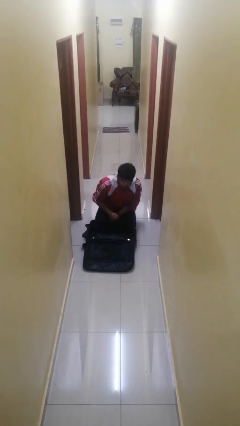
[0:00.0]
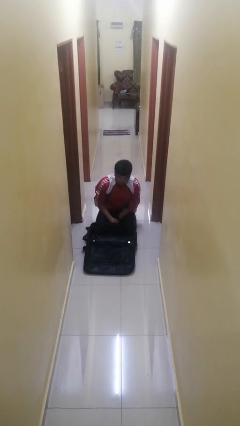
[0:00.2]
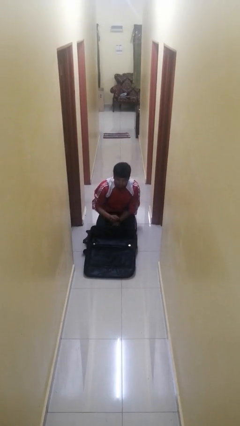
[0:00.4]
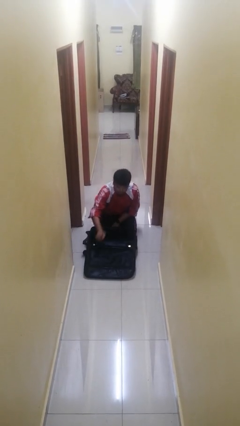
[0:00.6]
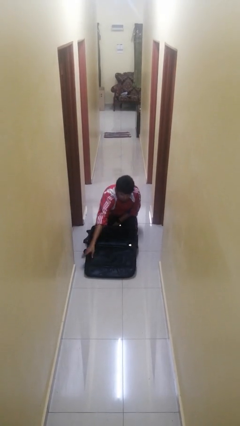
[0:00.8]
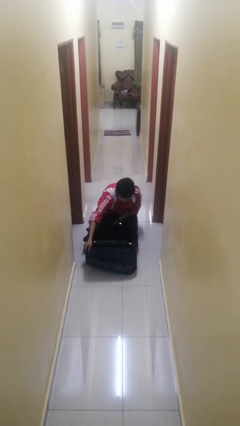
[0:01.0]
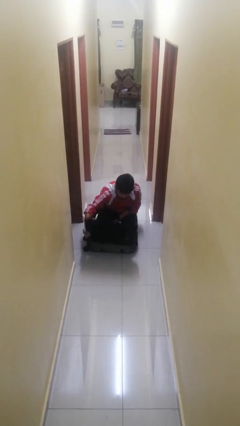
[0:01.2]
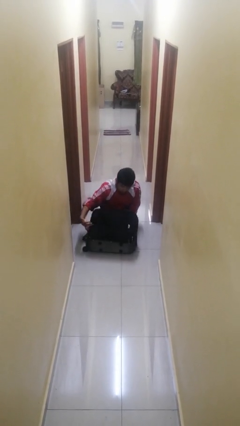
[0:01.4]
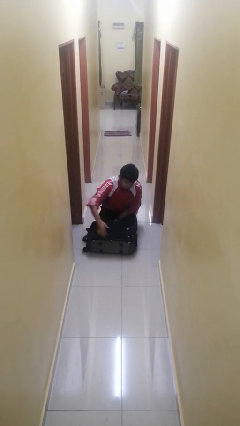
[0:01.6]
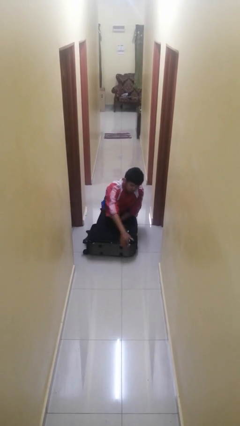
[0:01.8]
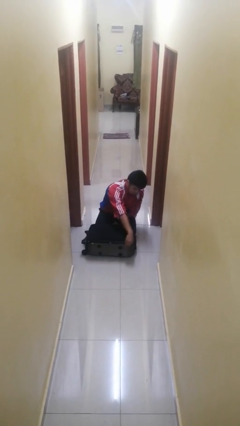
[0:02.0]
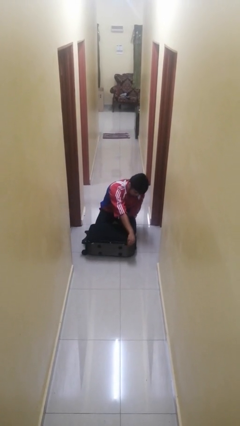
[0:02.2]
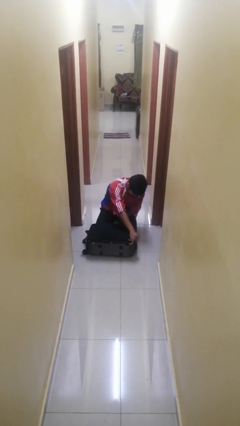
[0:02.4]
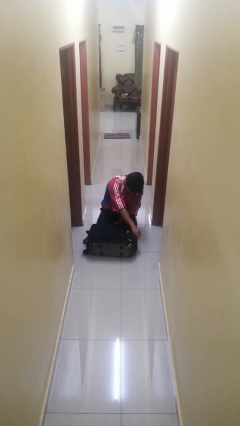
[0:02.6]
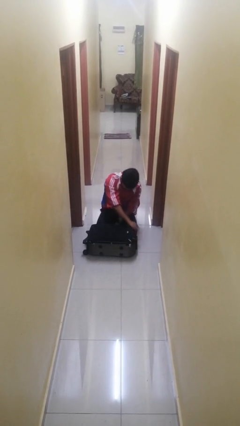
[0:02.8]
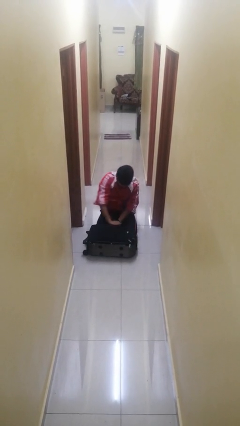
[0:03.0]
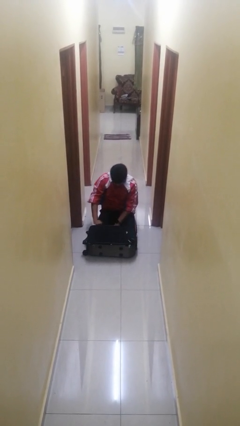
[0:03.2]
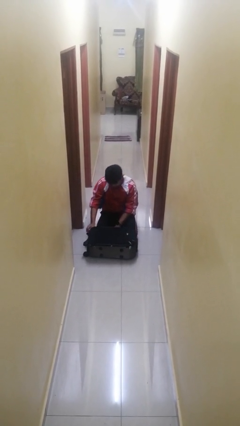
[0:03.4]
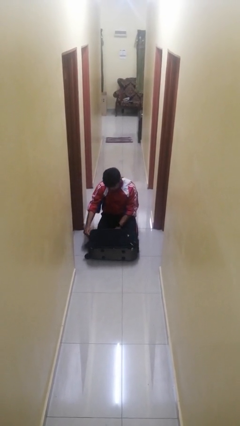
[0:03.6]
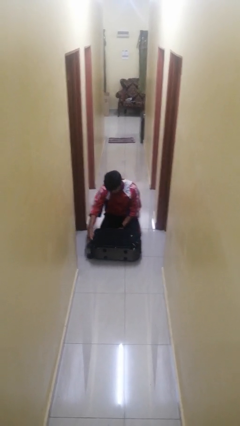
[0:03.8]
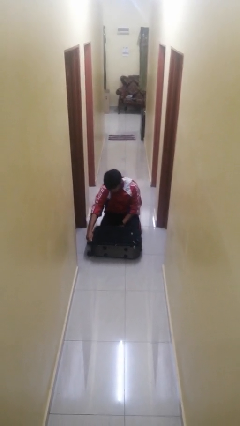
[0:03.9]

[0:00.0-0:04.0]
person closes suitcase

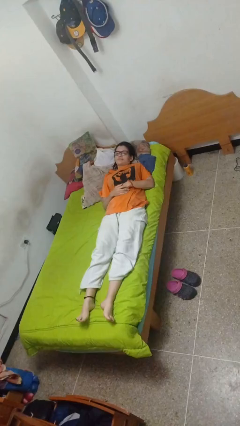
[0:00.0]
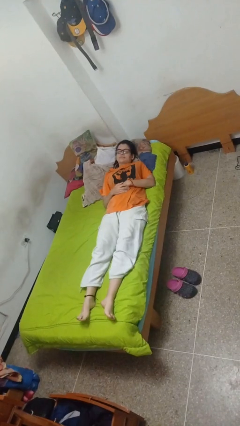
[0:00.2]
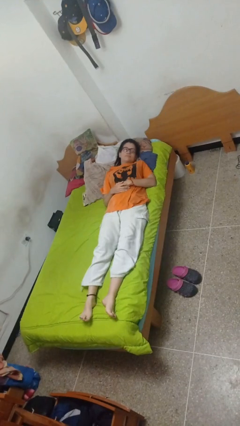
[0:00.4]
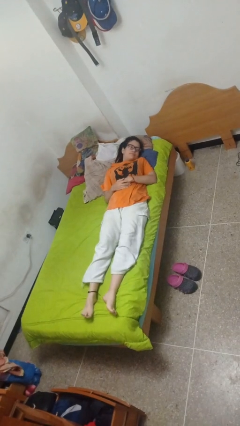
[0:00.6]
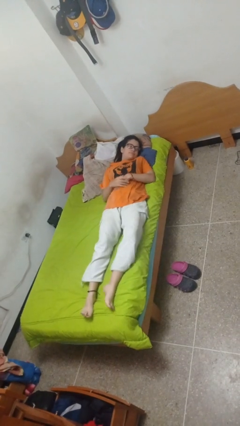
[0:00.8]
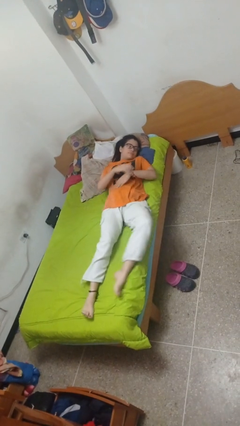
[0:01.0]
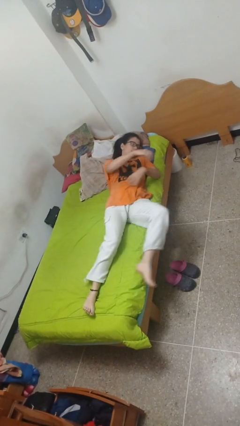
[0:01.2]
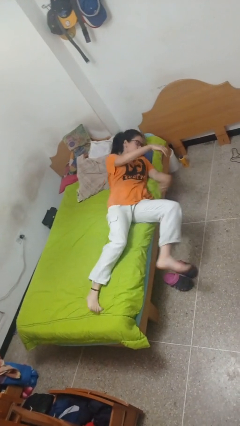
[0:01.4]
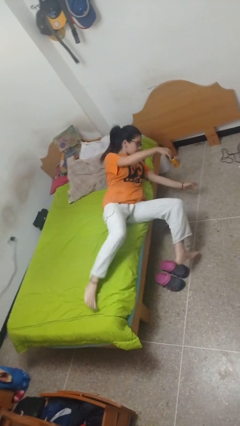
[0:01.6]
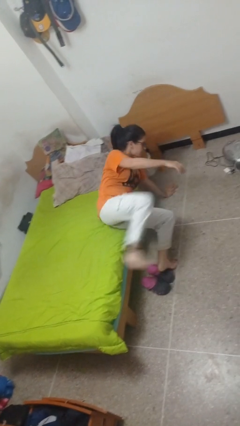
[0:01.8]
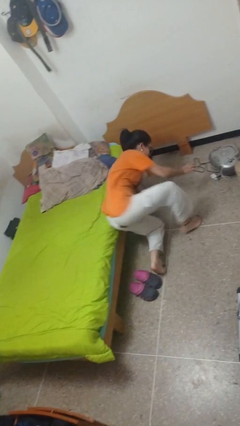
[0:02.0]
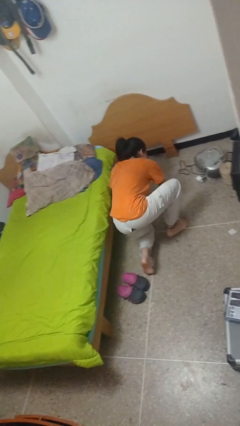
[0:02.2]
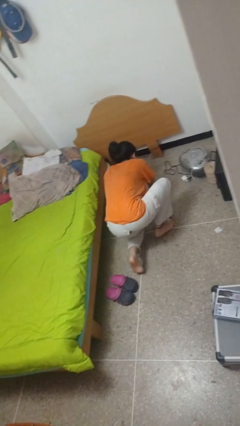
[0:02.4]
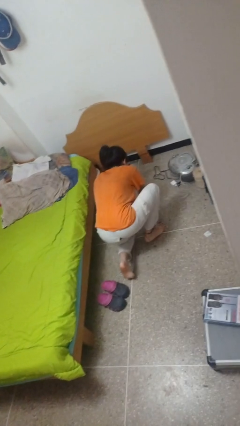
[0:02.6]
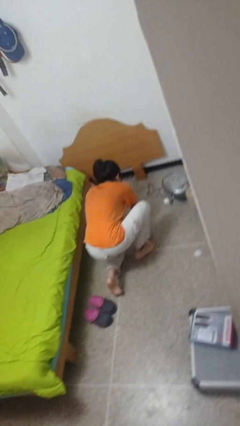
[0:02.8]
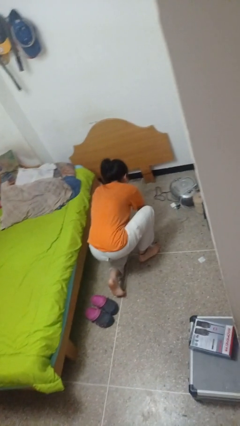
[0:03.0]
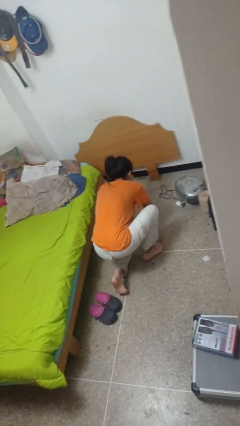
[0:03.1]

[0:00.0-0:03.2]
person falls from bed

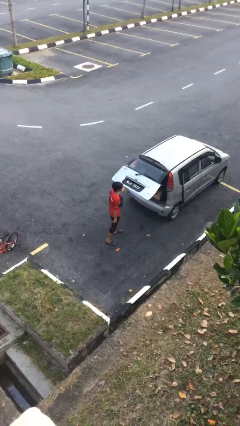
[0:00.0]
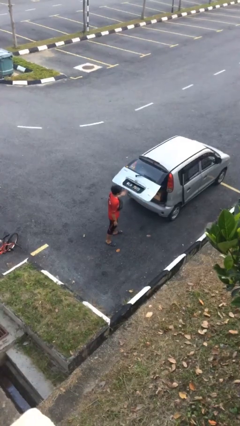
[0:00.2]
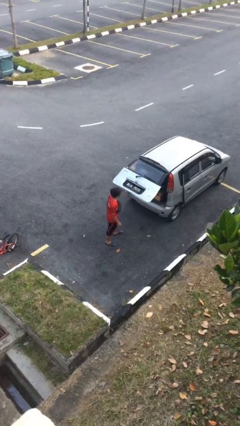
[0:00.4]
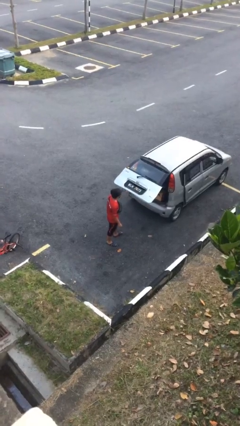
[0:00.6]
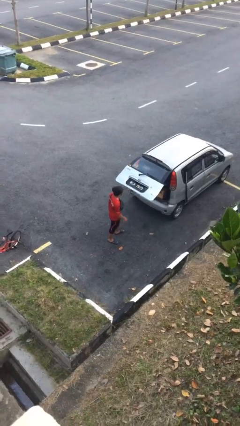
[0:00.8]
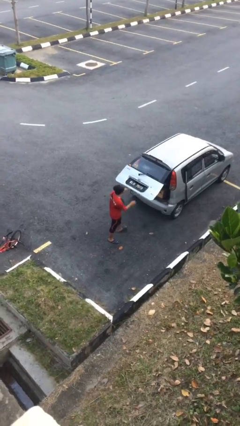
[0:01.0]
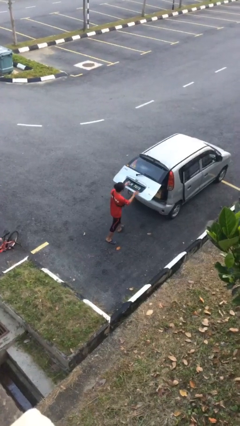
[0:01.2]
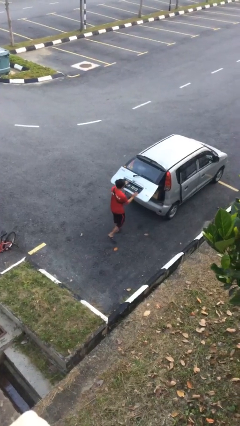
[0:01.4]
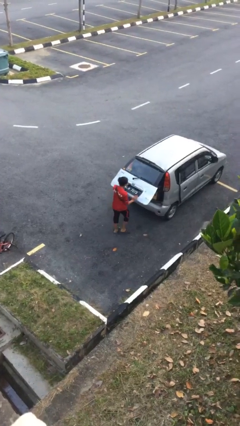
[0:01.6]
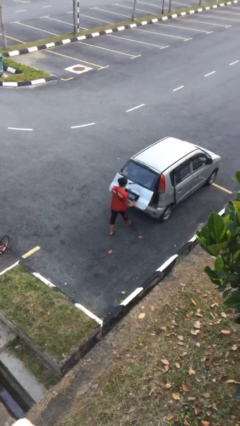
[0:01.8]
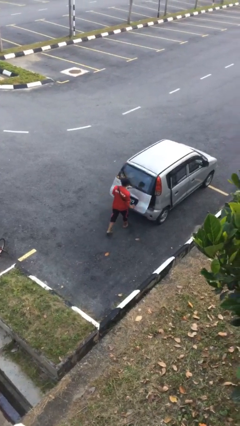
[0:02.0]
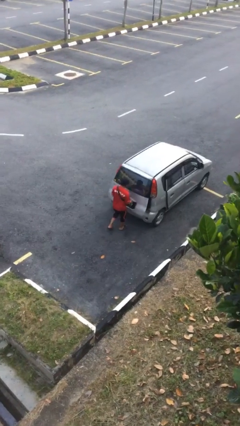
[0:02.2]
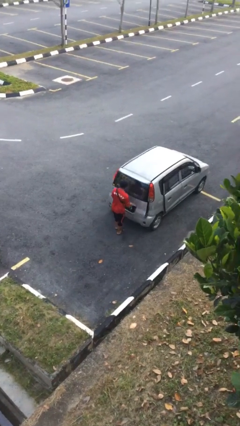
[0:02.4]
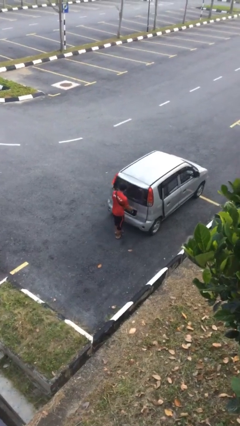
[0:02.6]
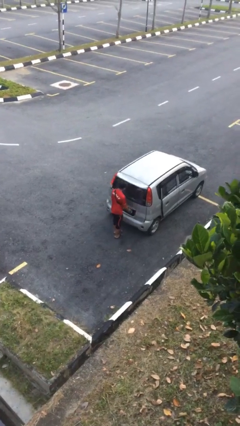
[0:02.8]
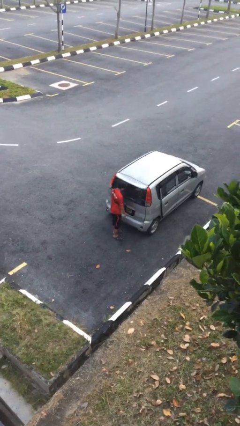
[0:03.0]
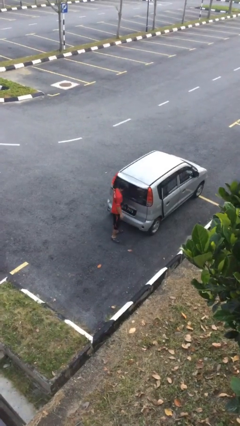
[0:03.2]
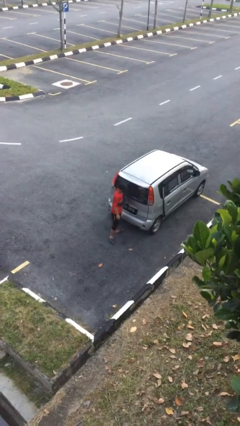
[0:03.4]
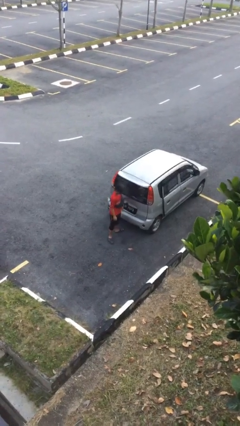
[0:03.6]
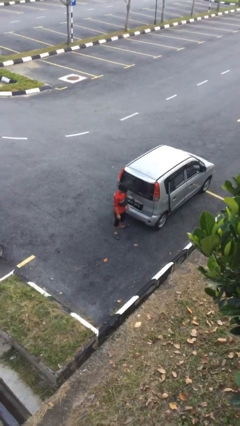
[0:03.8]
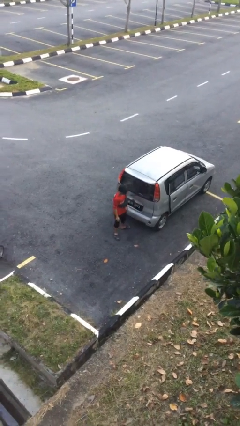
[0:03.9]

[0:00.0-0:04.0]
person closes car trunk

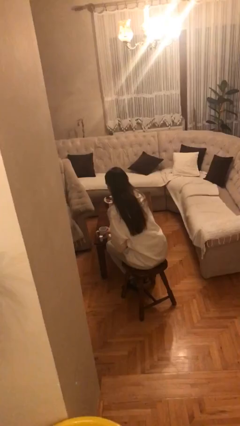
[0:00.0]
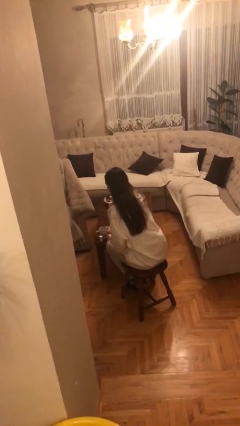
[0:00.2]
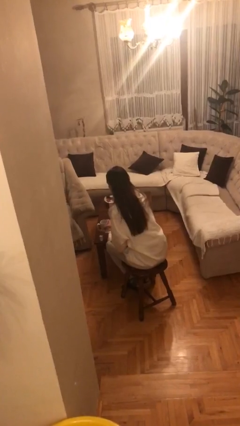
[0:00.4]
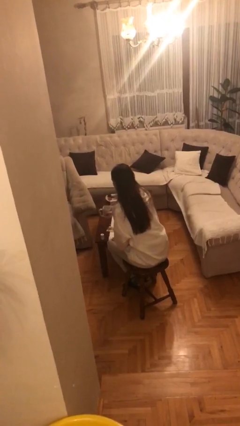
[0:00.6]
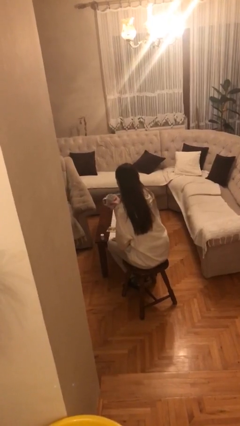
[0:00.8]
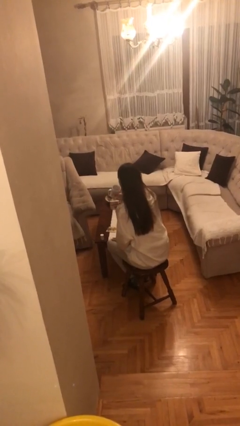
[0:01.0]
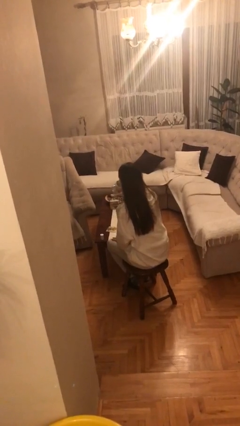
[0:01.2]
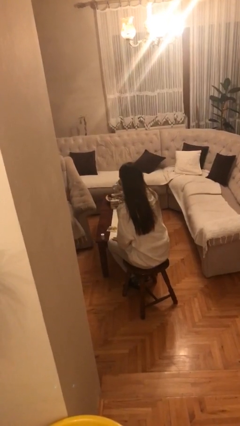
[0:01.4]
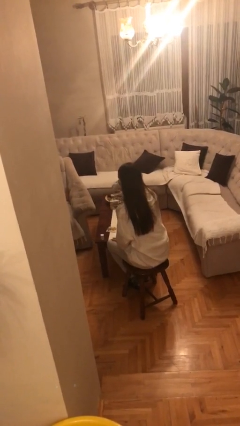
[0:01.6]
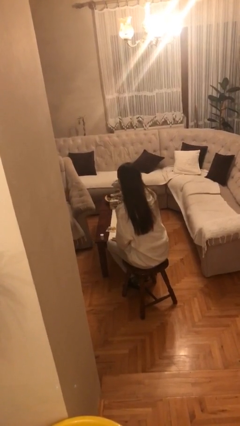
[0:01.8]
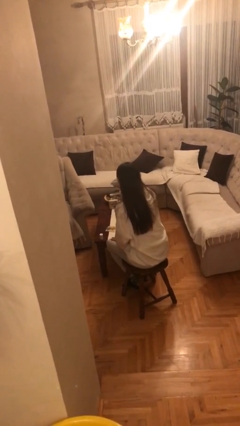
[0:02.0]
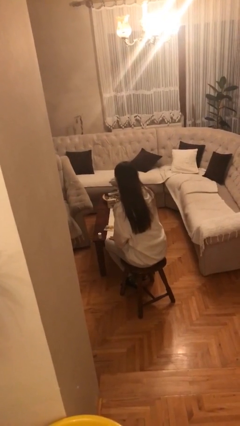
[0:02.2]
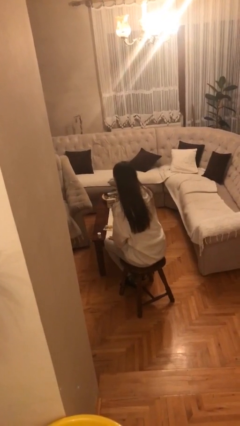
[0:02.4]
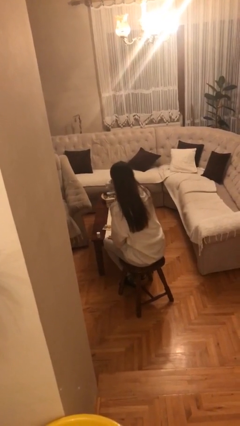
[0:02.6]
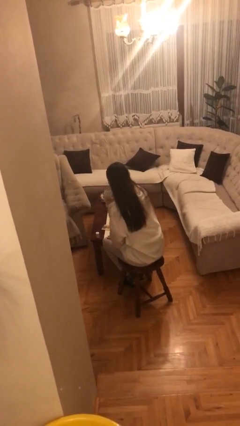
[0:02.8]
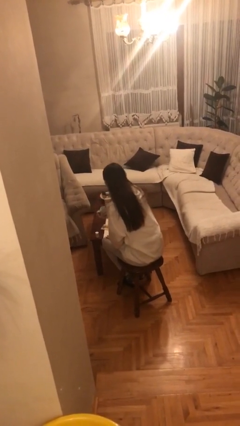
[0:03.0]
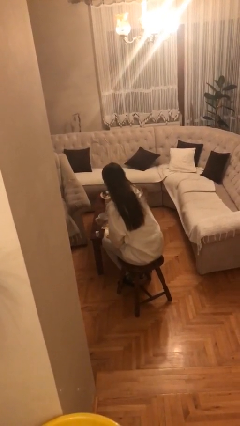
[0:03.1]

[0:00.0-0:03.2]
person drinks from cup

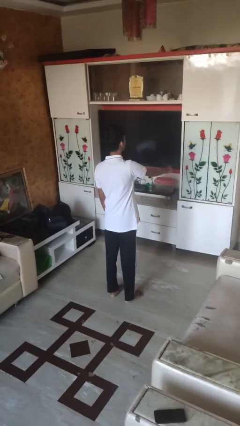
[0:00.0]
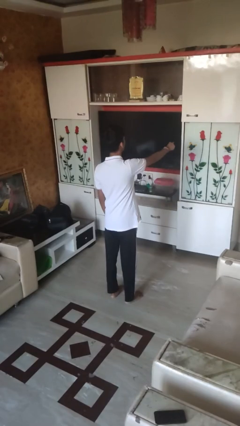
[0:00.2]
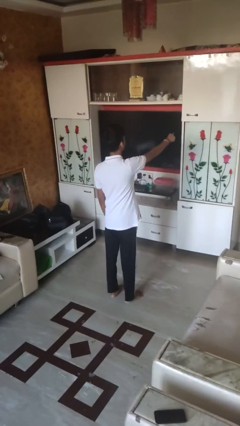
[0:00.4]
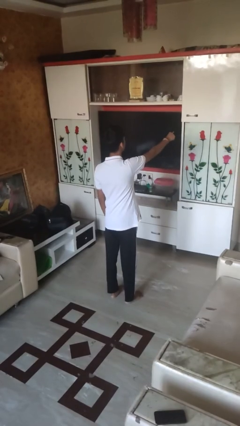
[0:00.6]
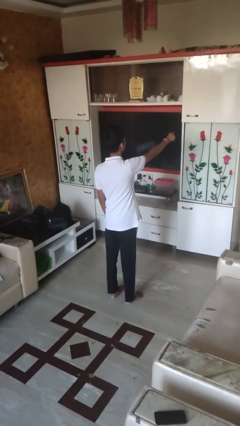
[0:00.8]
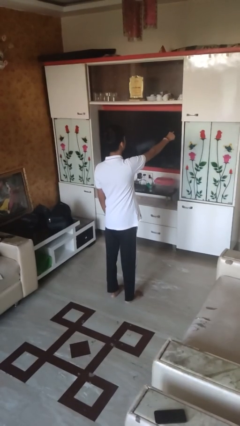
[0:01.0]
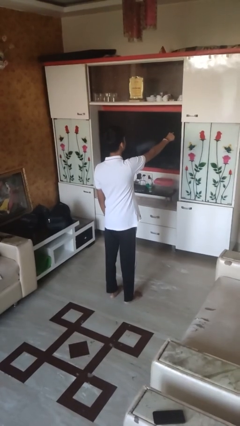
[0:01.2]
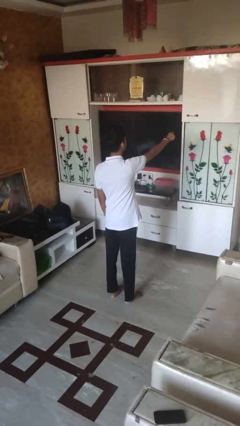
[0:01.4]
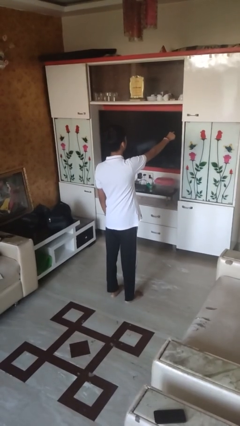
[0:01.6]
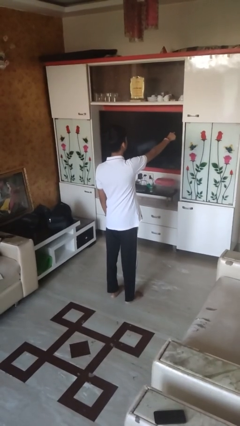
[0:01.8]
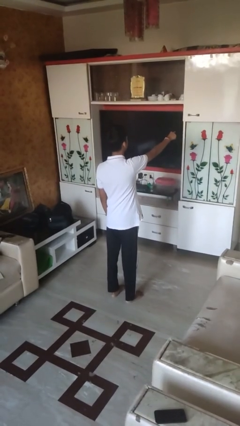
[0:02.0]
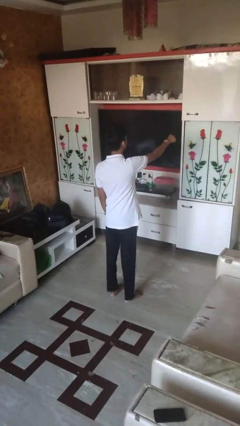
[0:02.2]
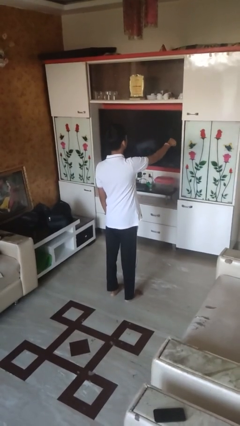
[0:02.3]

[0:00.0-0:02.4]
person points at person

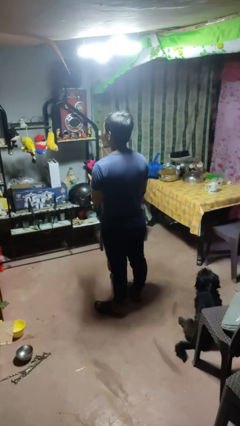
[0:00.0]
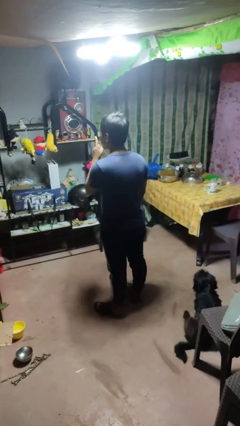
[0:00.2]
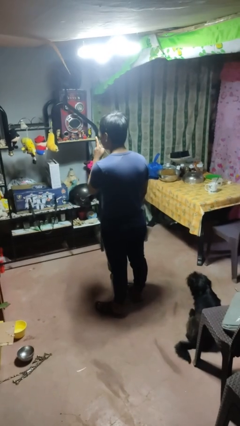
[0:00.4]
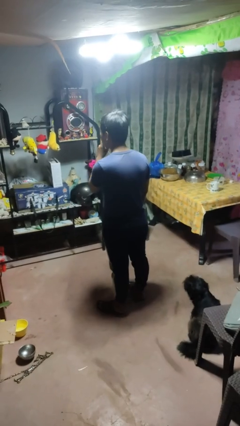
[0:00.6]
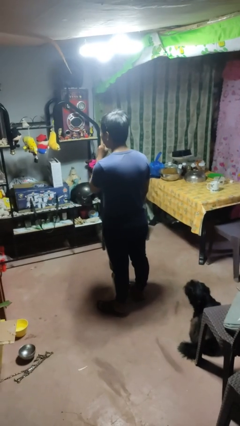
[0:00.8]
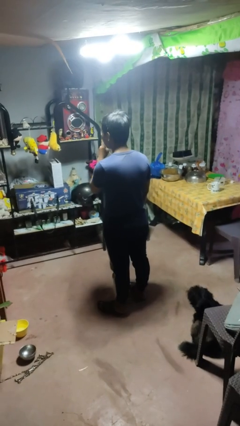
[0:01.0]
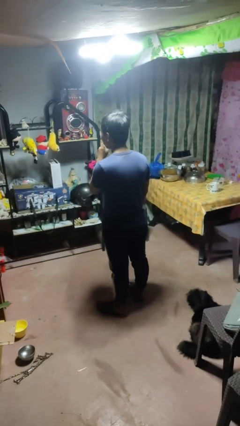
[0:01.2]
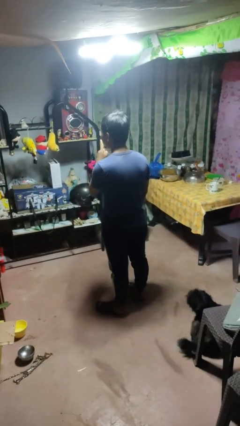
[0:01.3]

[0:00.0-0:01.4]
person gestures be quiet
